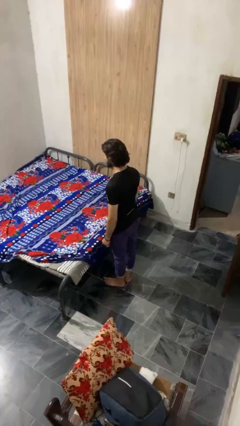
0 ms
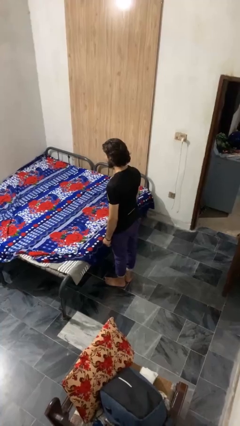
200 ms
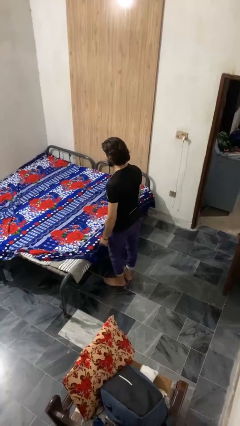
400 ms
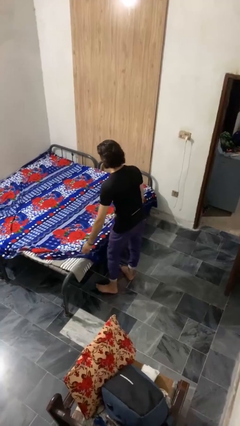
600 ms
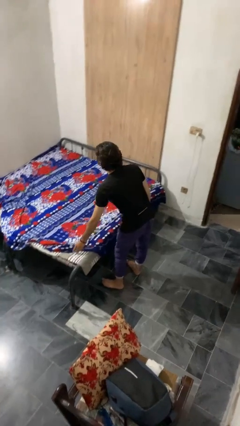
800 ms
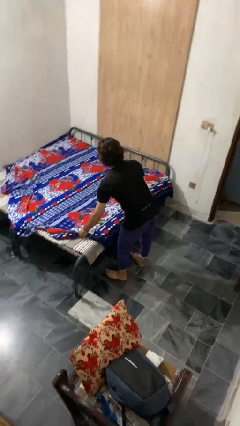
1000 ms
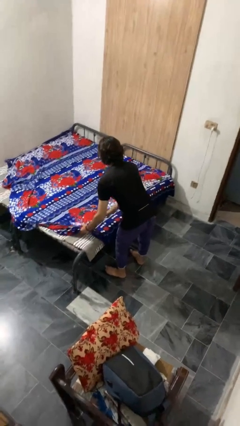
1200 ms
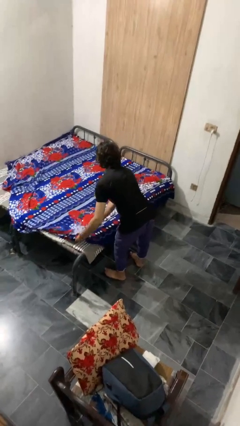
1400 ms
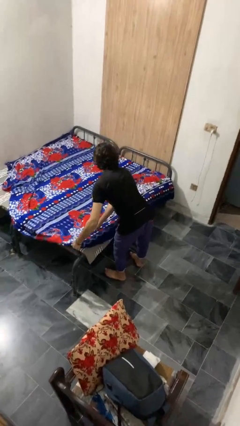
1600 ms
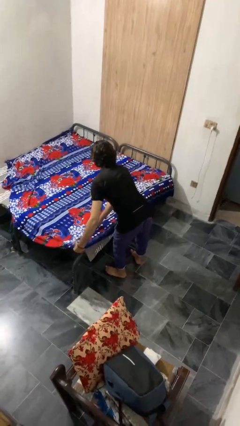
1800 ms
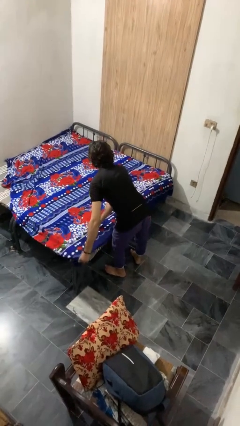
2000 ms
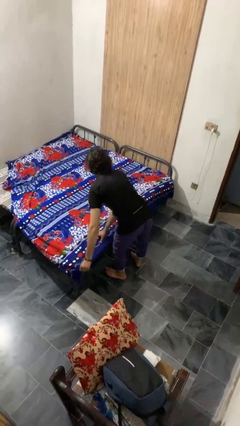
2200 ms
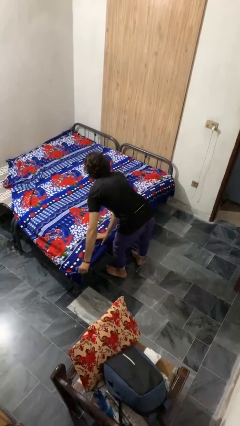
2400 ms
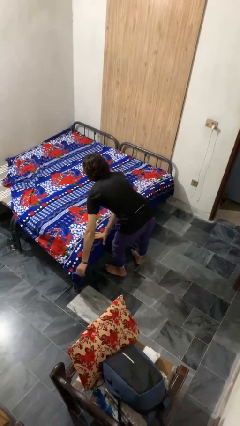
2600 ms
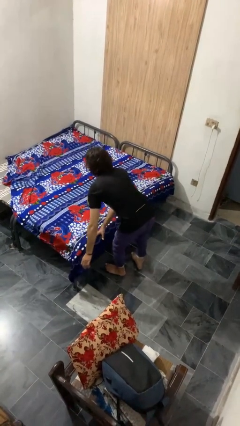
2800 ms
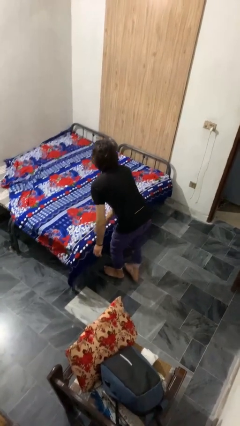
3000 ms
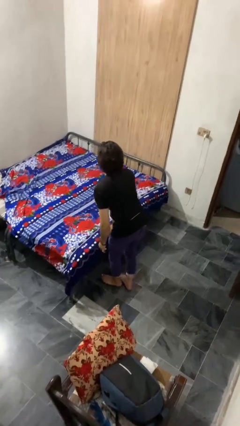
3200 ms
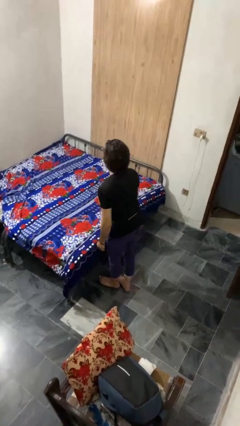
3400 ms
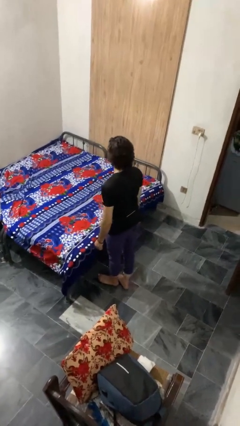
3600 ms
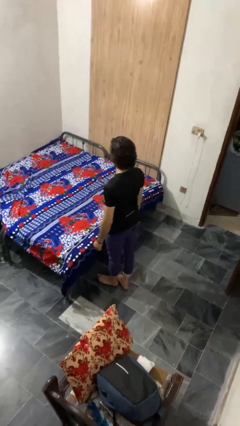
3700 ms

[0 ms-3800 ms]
person makes bed

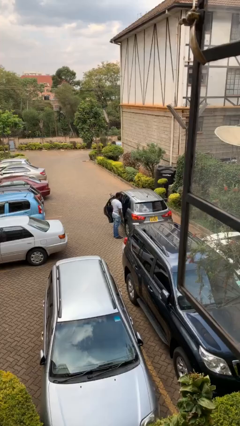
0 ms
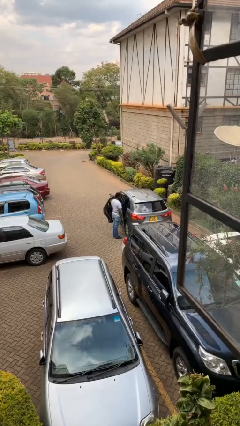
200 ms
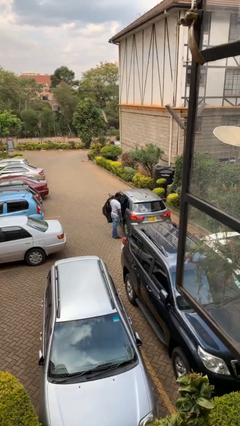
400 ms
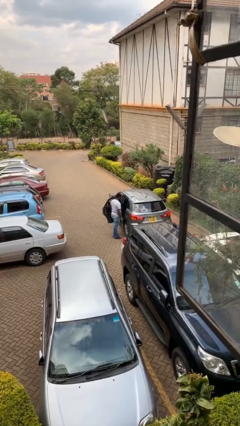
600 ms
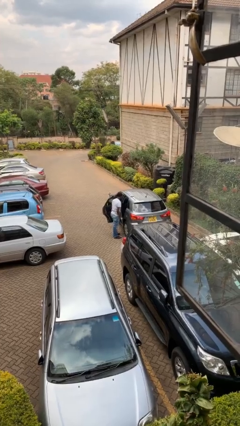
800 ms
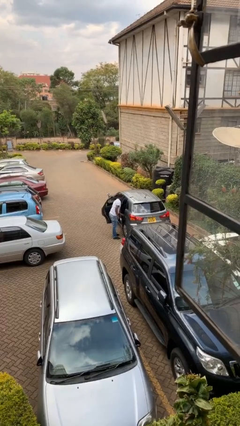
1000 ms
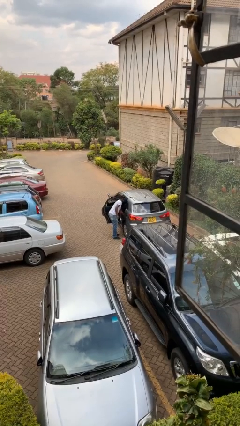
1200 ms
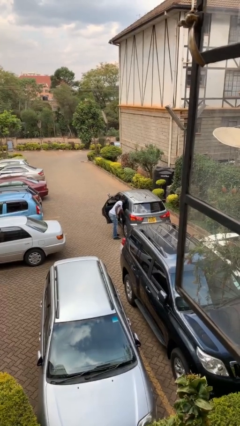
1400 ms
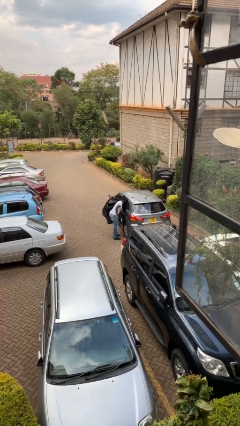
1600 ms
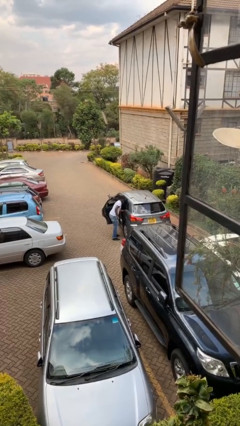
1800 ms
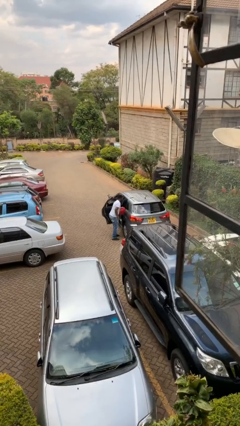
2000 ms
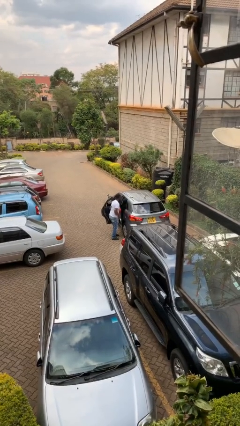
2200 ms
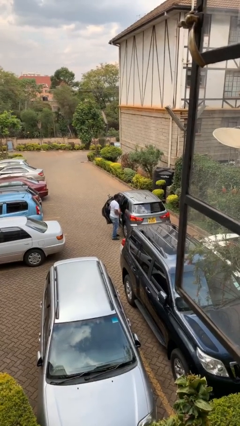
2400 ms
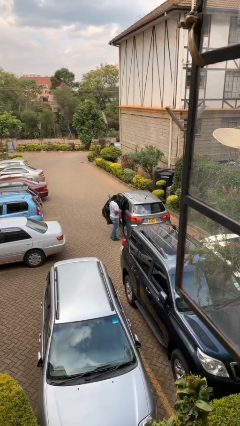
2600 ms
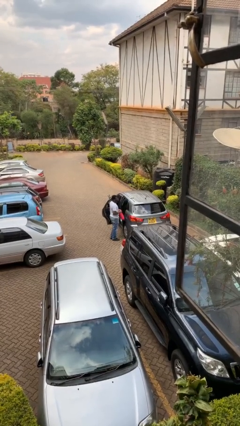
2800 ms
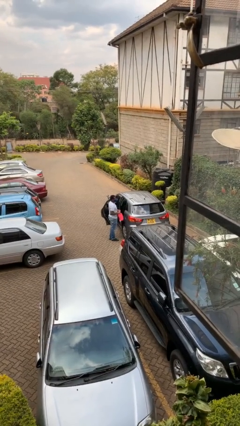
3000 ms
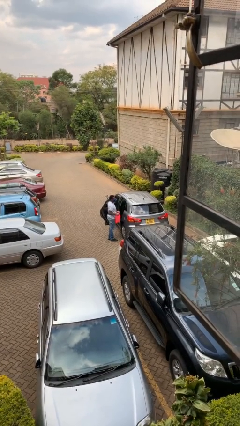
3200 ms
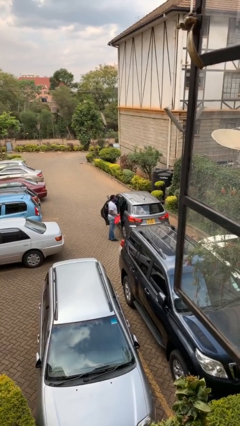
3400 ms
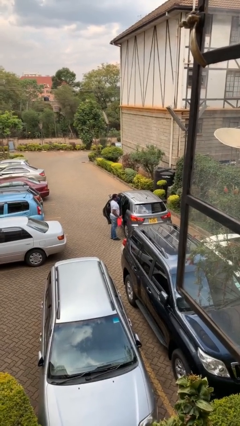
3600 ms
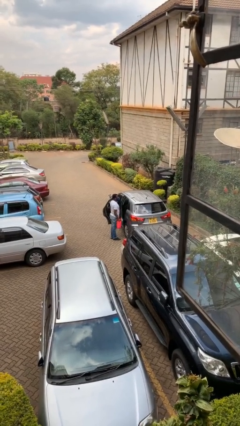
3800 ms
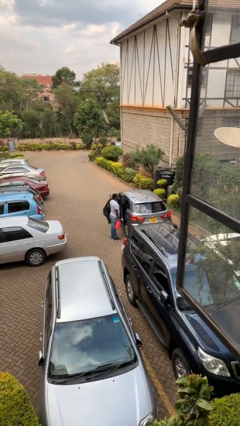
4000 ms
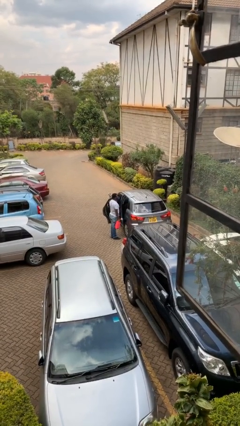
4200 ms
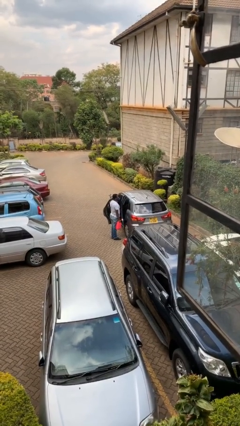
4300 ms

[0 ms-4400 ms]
person unloads car

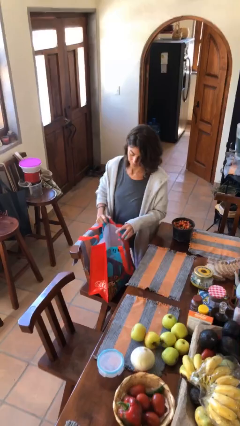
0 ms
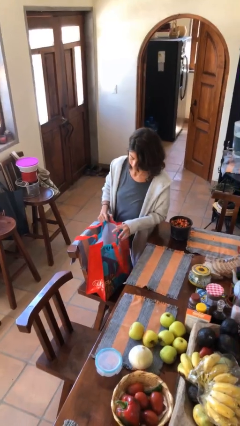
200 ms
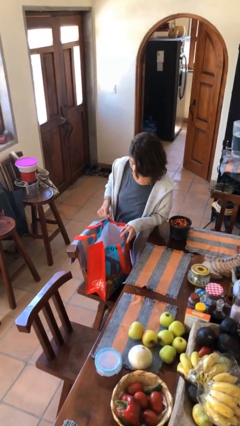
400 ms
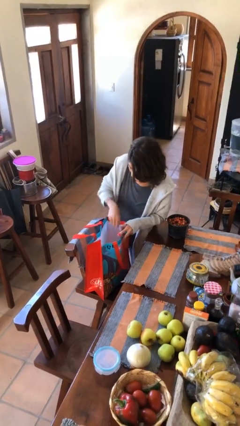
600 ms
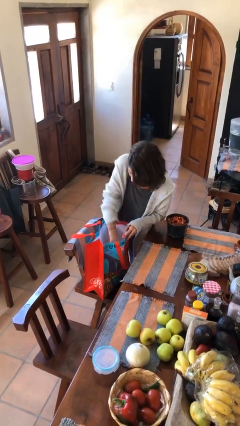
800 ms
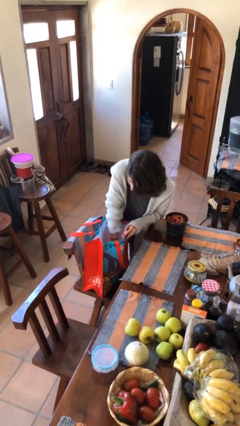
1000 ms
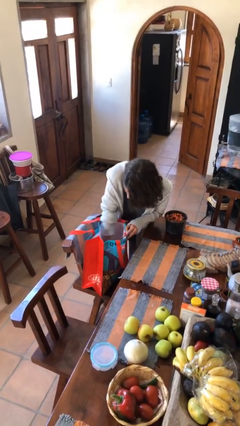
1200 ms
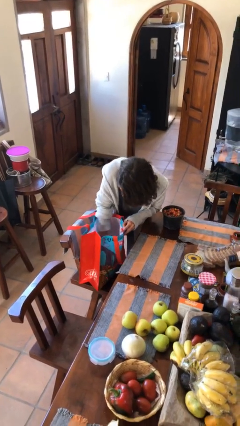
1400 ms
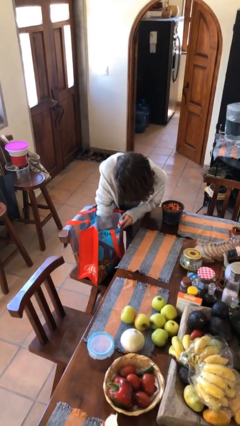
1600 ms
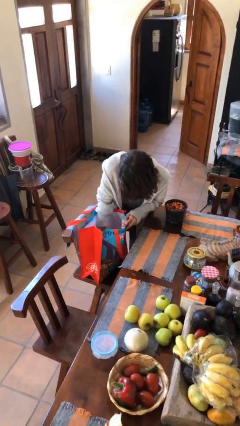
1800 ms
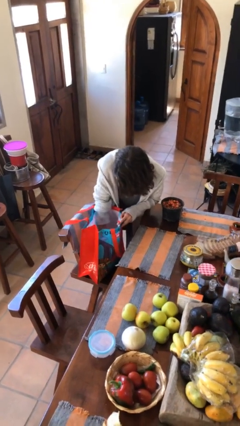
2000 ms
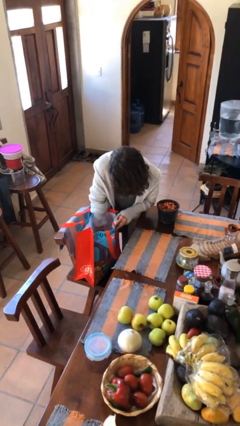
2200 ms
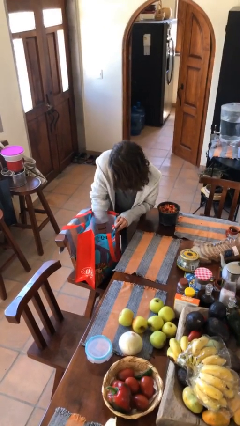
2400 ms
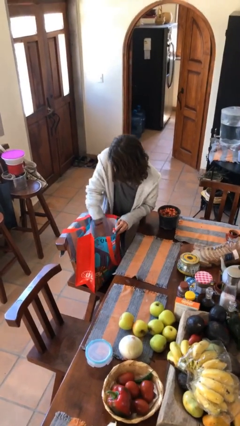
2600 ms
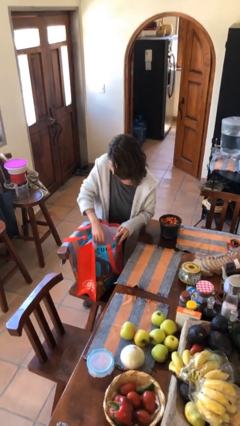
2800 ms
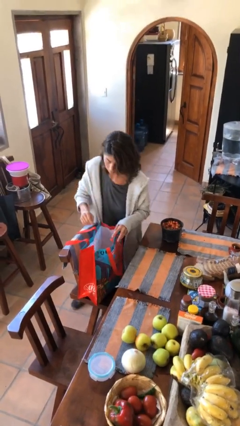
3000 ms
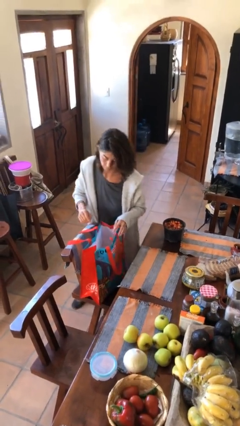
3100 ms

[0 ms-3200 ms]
person searches in bag

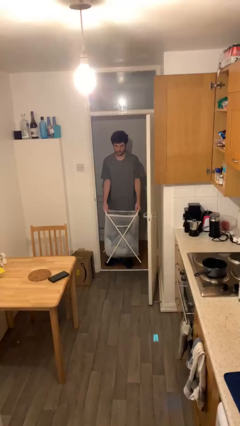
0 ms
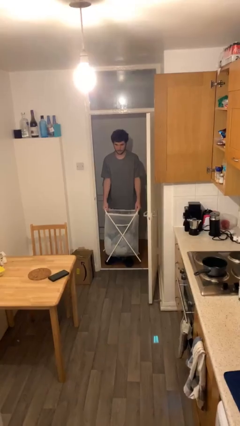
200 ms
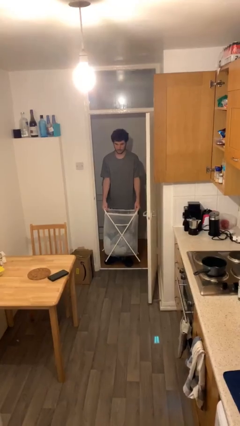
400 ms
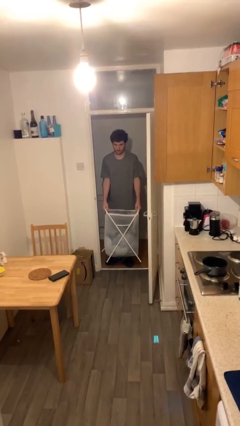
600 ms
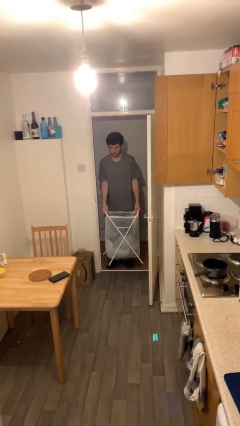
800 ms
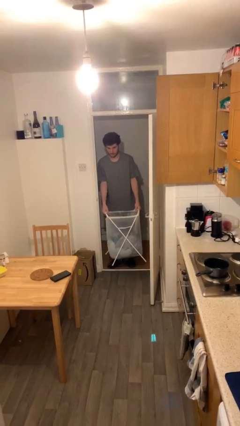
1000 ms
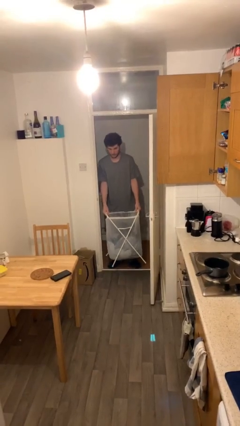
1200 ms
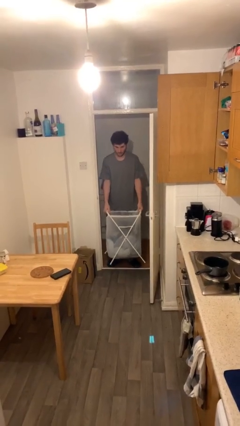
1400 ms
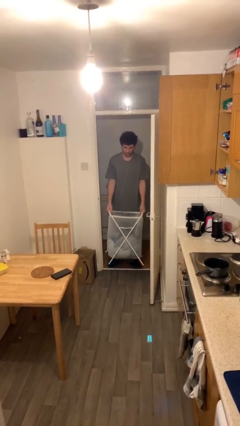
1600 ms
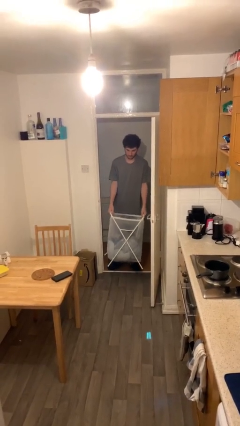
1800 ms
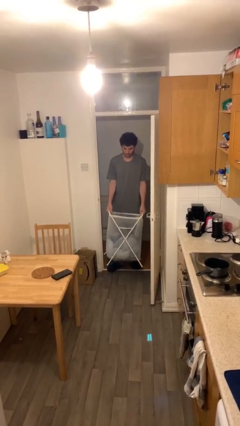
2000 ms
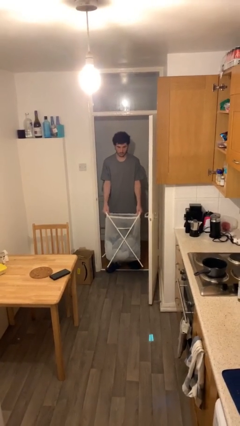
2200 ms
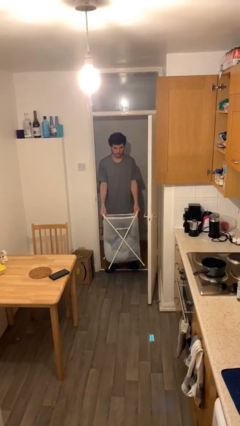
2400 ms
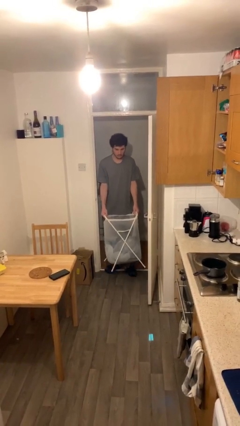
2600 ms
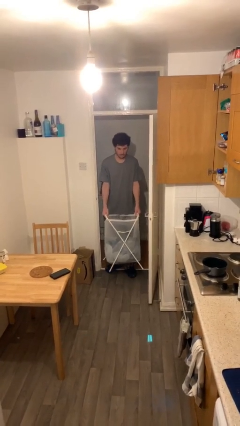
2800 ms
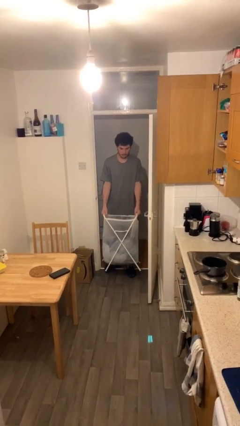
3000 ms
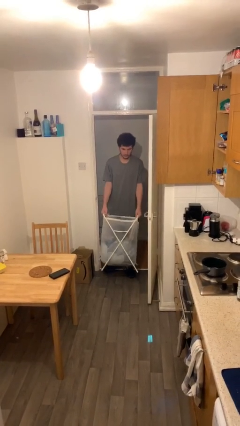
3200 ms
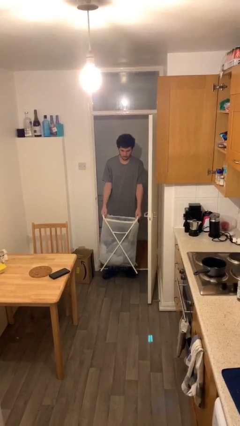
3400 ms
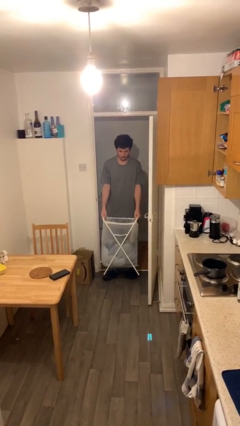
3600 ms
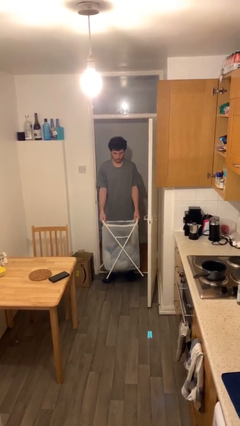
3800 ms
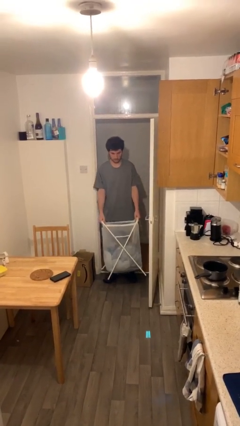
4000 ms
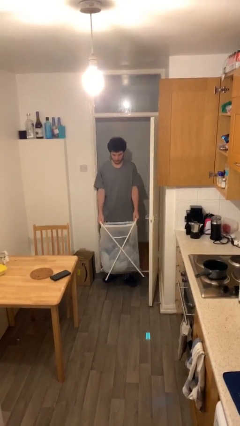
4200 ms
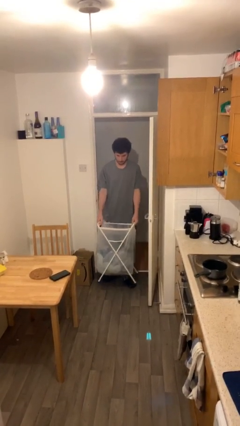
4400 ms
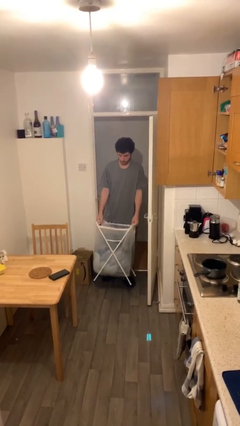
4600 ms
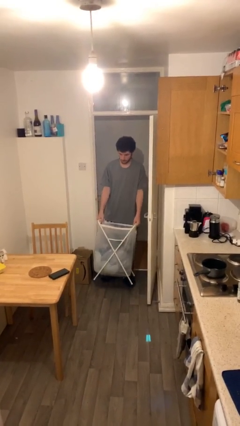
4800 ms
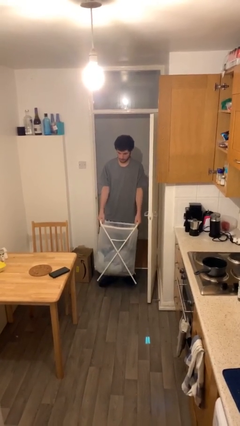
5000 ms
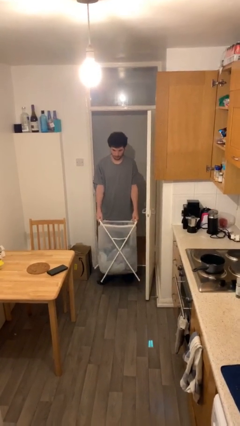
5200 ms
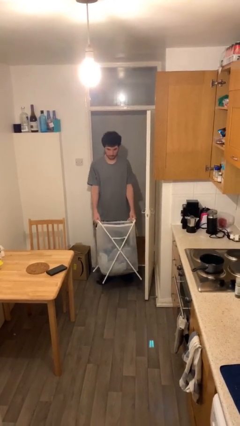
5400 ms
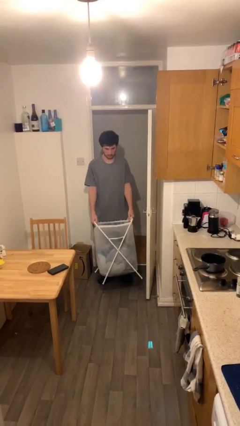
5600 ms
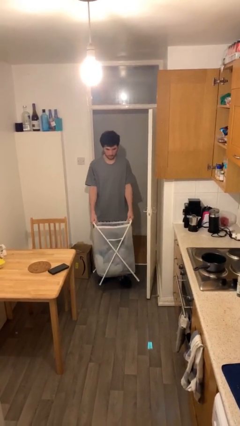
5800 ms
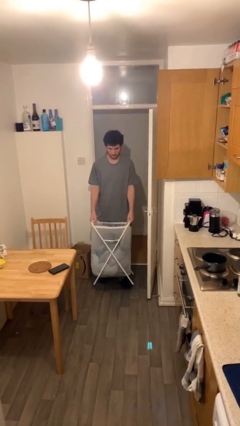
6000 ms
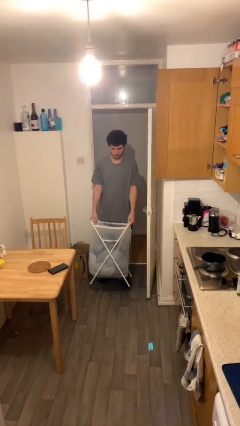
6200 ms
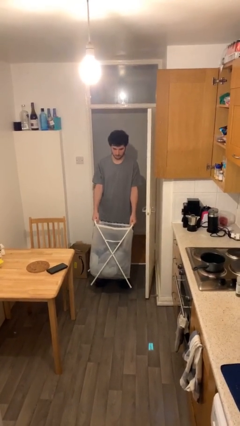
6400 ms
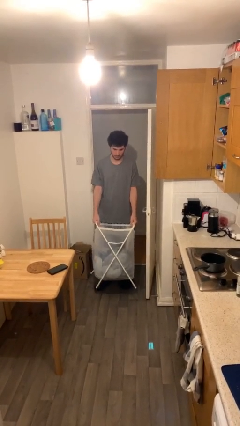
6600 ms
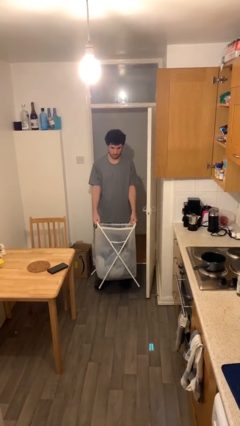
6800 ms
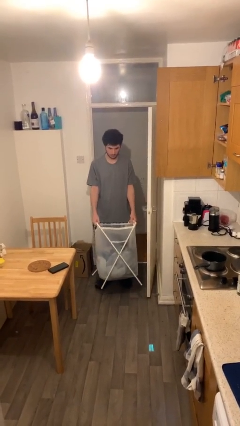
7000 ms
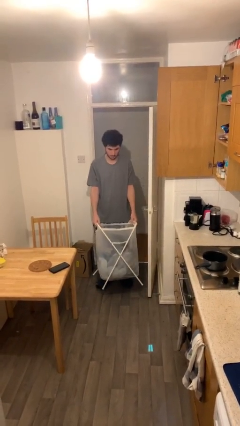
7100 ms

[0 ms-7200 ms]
person carries heavy object
